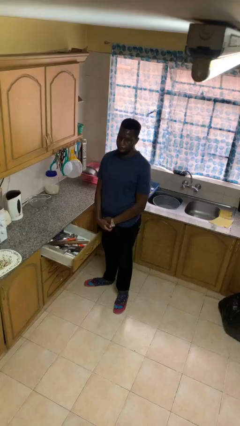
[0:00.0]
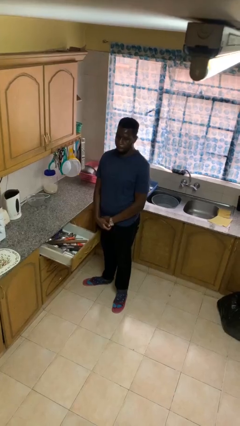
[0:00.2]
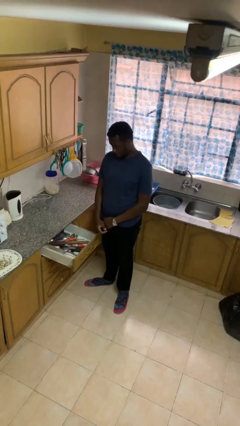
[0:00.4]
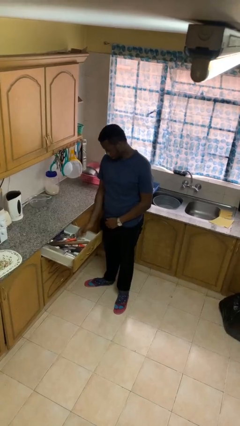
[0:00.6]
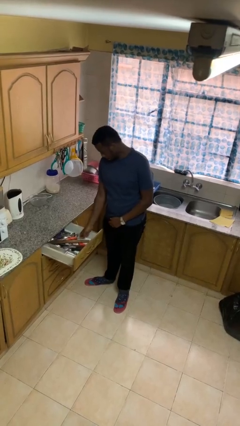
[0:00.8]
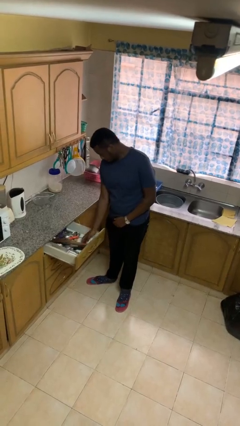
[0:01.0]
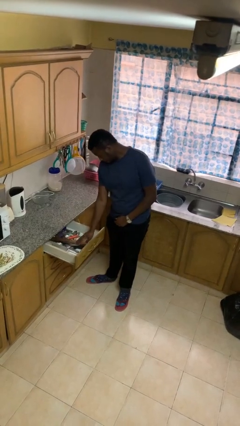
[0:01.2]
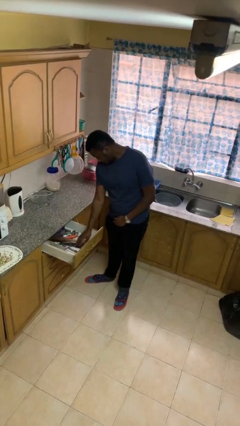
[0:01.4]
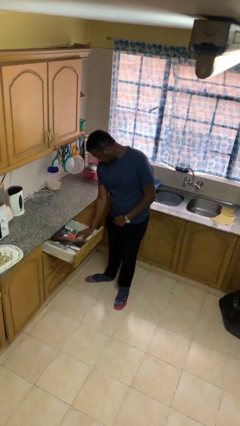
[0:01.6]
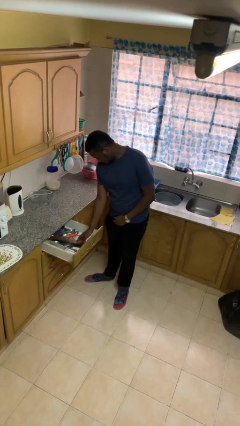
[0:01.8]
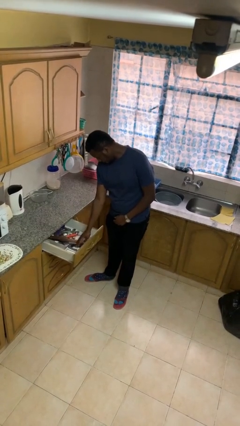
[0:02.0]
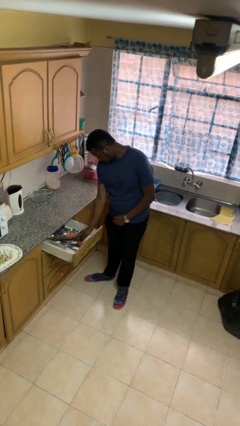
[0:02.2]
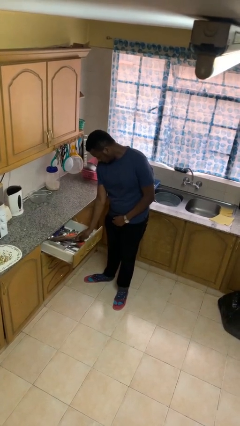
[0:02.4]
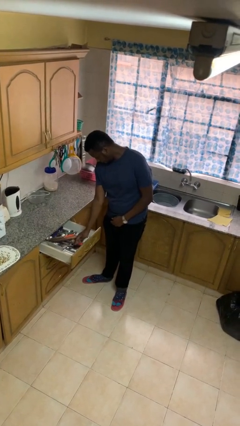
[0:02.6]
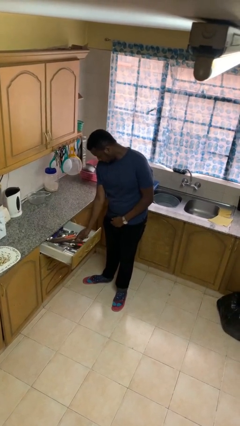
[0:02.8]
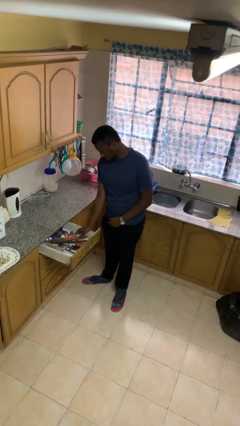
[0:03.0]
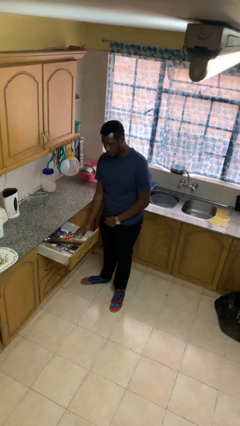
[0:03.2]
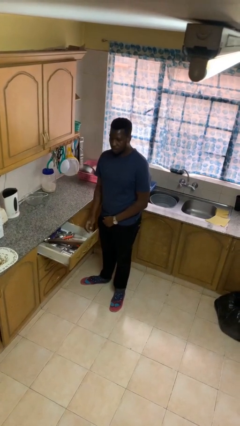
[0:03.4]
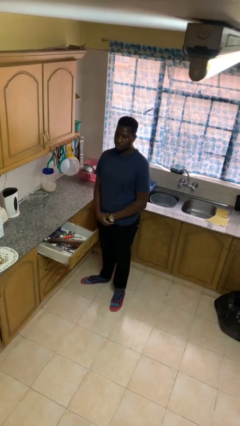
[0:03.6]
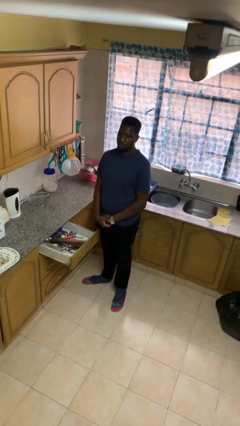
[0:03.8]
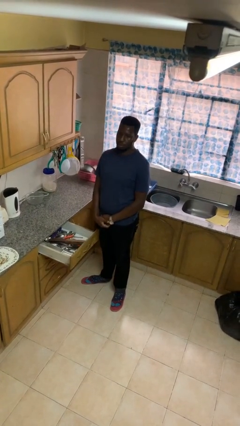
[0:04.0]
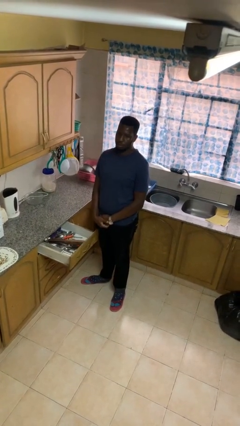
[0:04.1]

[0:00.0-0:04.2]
person searches in kitchen drawer

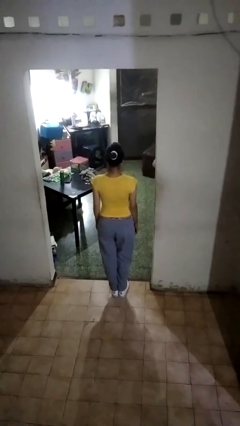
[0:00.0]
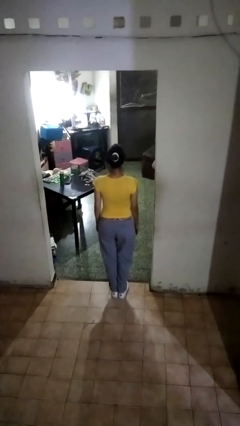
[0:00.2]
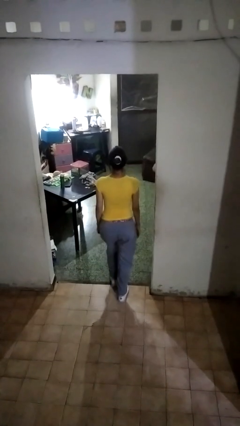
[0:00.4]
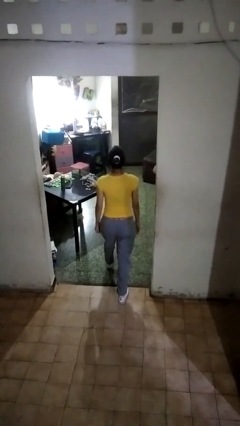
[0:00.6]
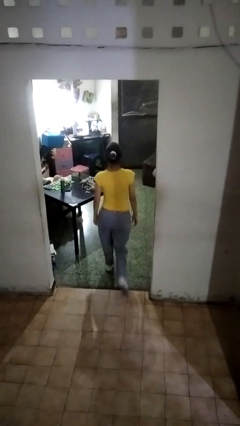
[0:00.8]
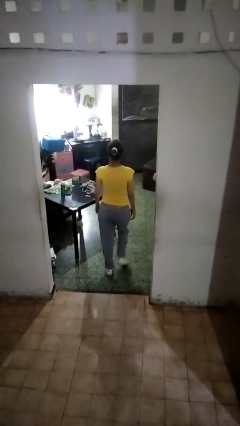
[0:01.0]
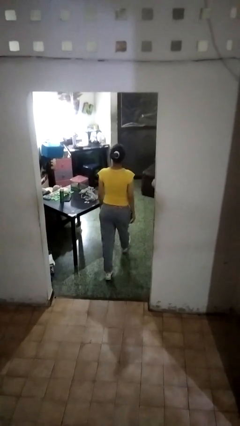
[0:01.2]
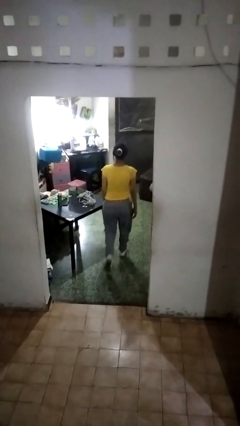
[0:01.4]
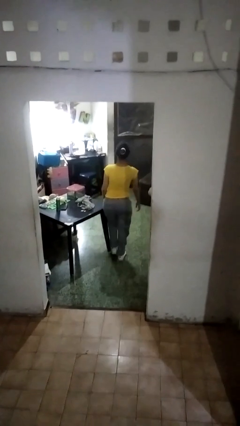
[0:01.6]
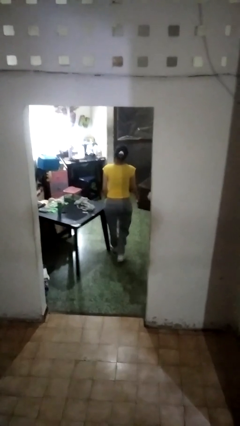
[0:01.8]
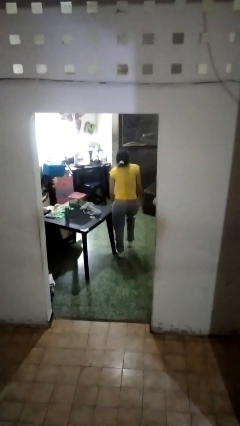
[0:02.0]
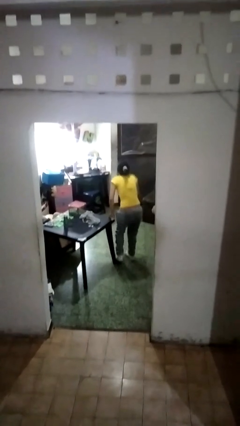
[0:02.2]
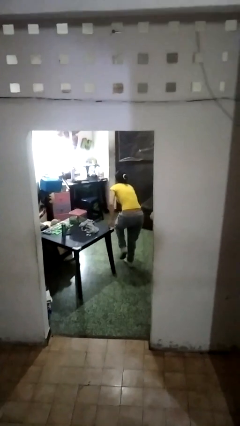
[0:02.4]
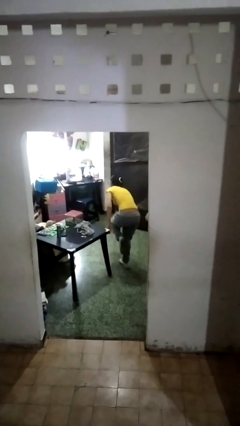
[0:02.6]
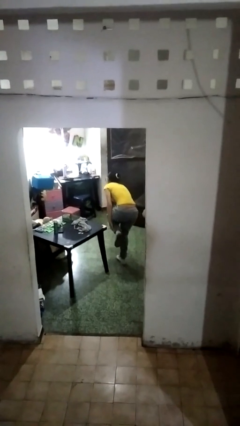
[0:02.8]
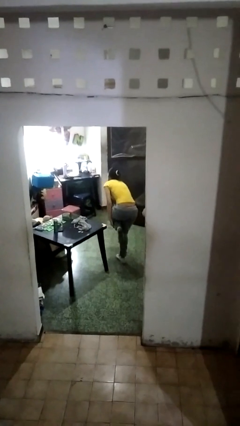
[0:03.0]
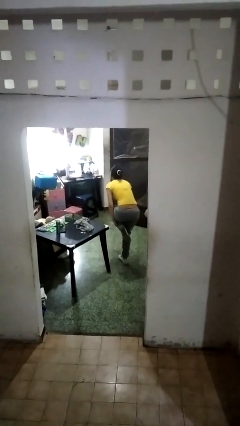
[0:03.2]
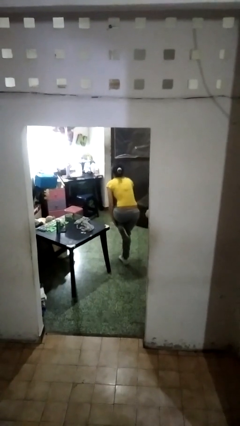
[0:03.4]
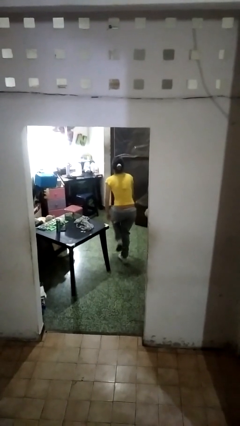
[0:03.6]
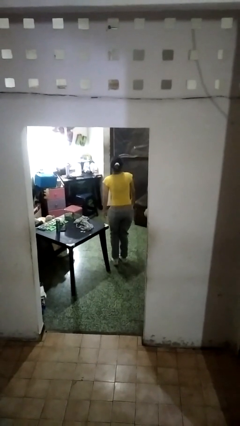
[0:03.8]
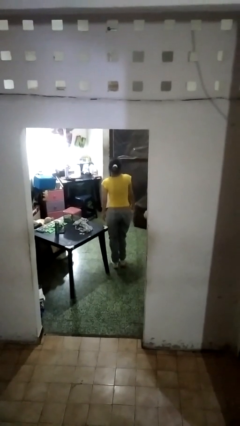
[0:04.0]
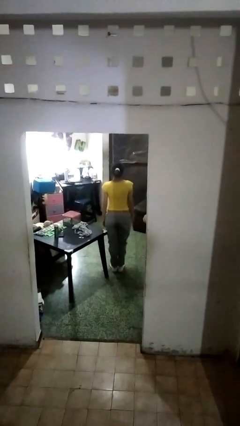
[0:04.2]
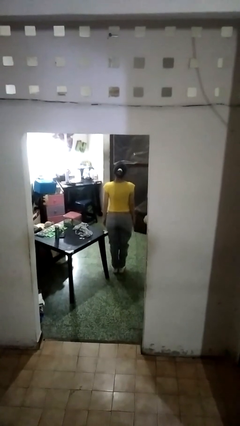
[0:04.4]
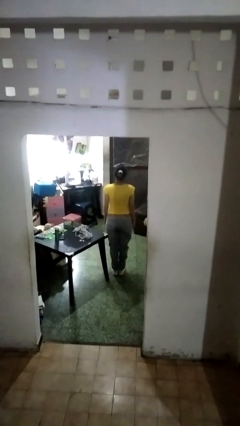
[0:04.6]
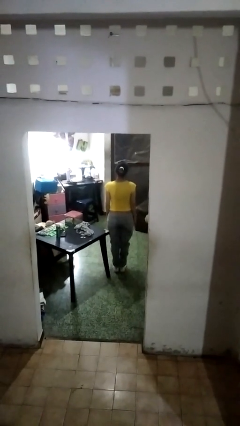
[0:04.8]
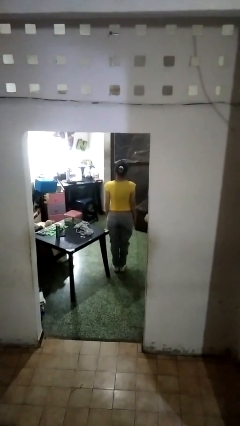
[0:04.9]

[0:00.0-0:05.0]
person bumps into table

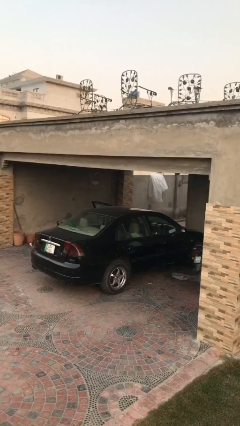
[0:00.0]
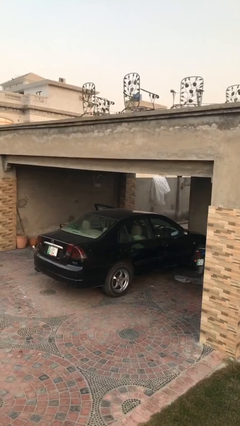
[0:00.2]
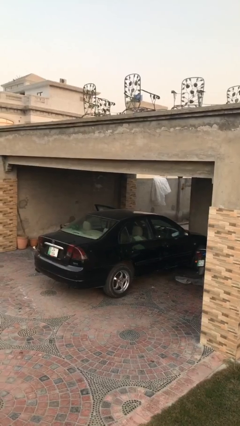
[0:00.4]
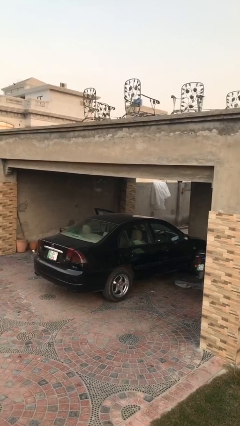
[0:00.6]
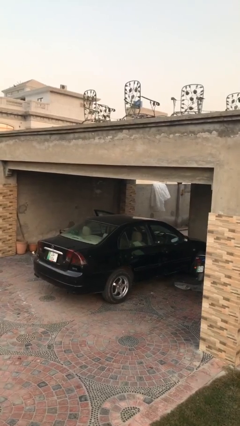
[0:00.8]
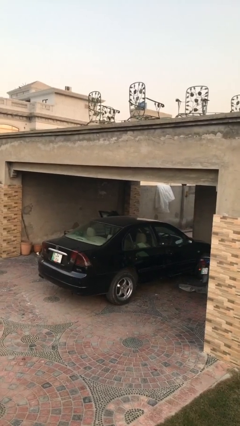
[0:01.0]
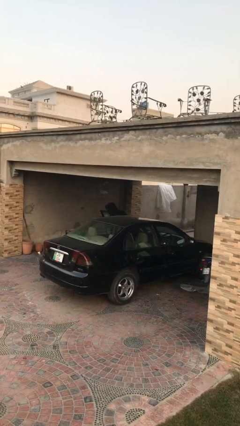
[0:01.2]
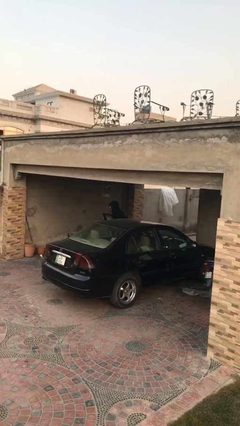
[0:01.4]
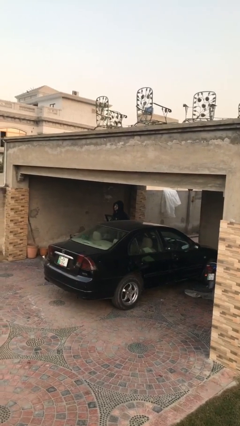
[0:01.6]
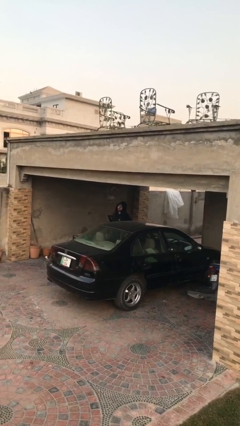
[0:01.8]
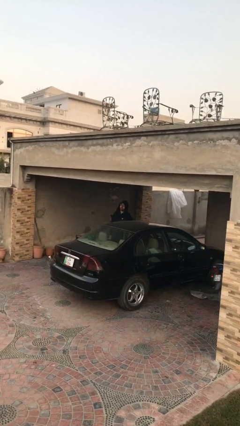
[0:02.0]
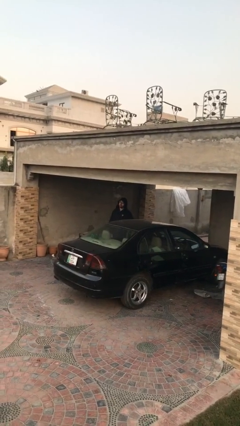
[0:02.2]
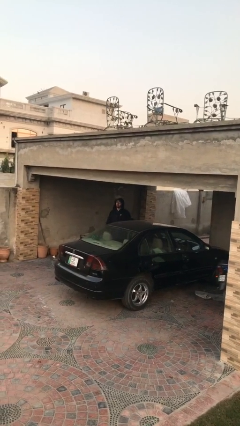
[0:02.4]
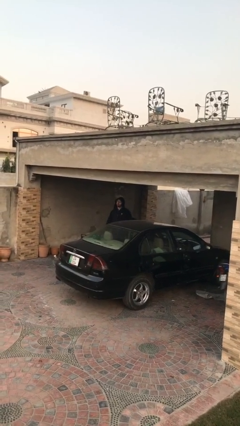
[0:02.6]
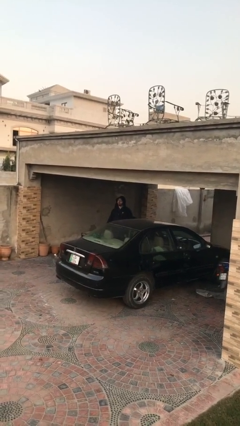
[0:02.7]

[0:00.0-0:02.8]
person exits car

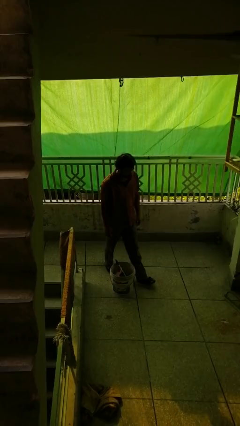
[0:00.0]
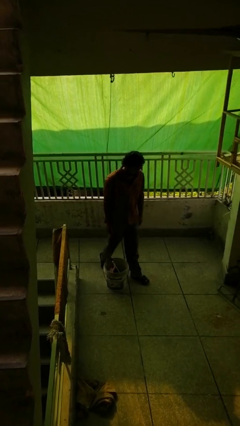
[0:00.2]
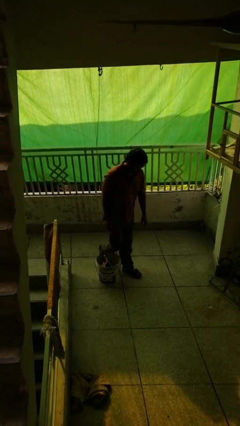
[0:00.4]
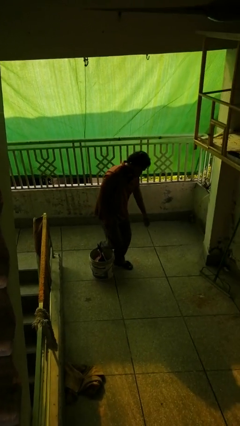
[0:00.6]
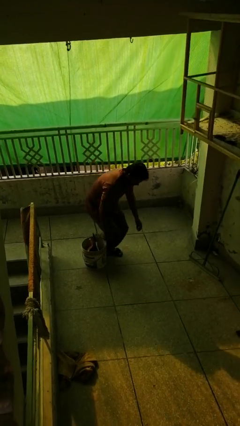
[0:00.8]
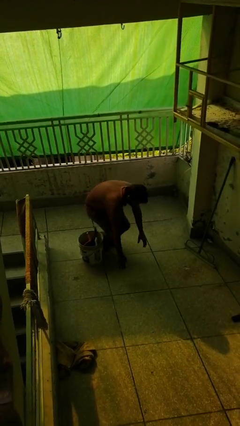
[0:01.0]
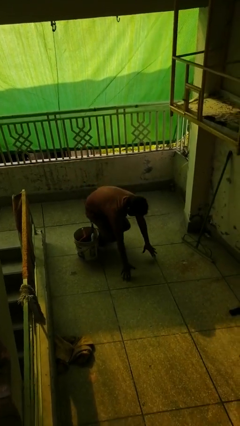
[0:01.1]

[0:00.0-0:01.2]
person trips on object on floor

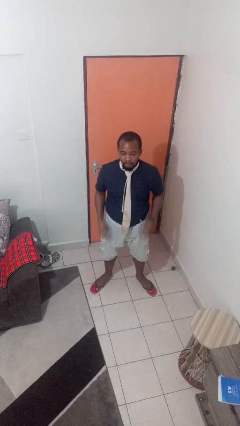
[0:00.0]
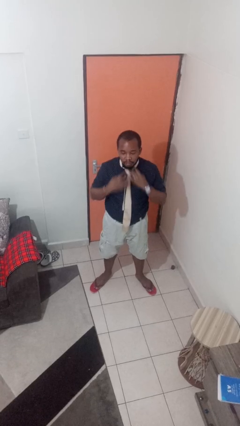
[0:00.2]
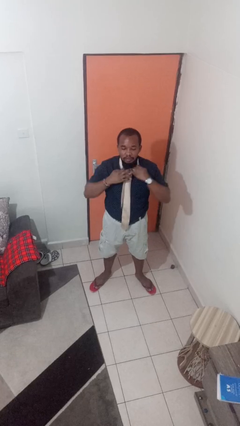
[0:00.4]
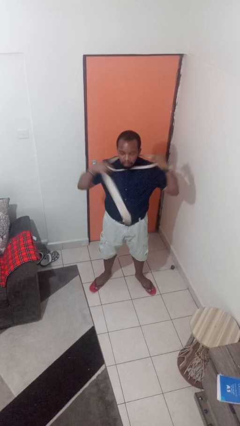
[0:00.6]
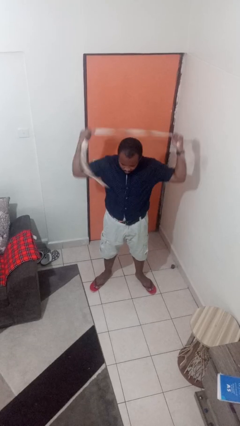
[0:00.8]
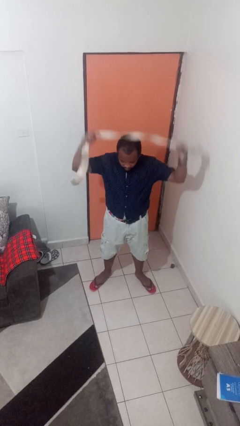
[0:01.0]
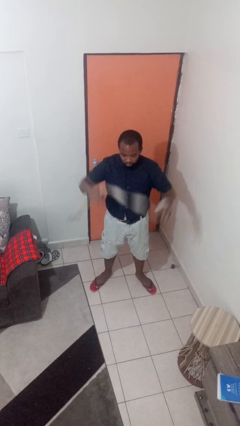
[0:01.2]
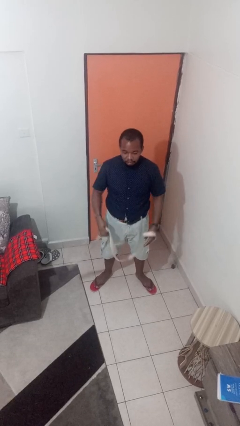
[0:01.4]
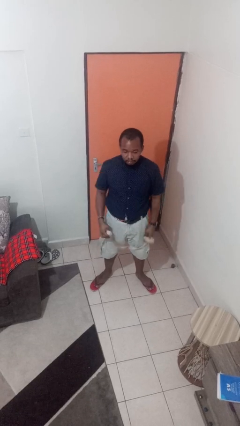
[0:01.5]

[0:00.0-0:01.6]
person takes off necktie

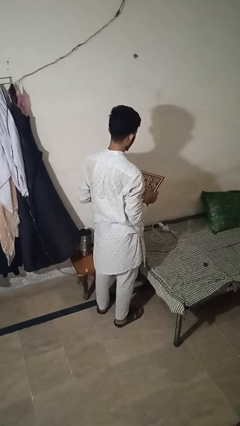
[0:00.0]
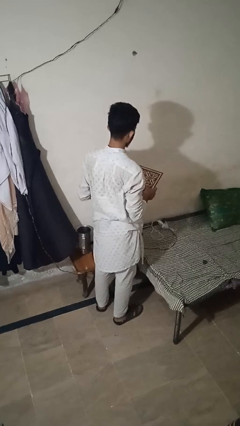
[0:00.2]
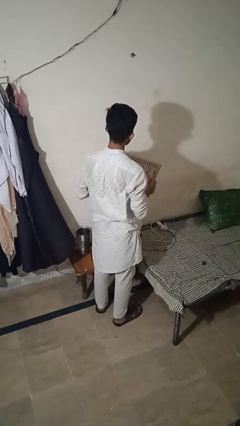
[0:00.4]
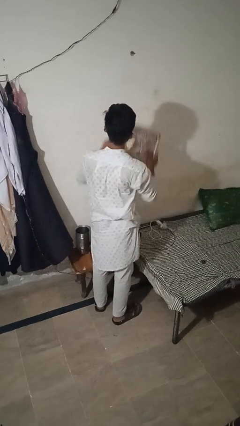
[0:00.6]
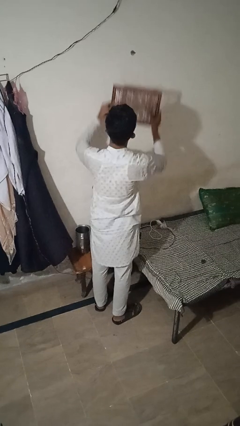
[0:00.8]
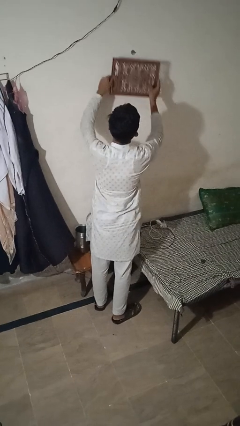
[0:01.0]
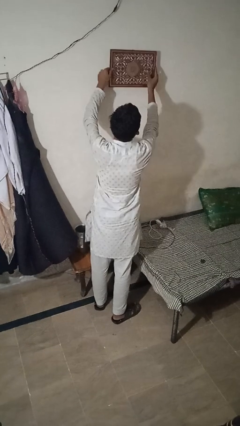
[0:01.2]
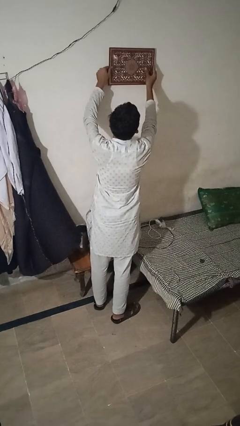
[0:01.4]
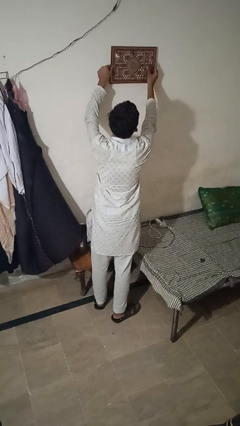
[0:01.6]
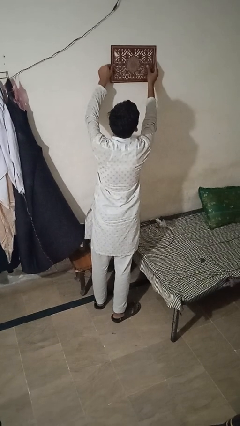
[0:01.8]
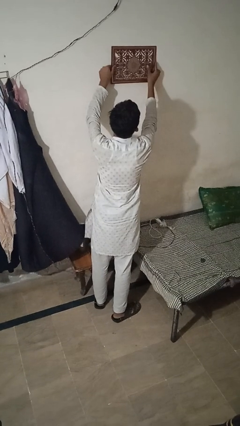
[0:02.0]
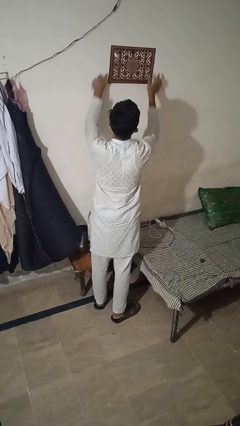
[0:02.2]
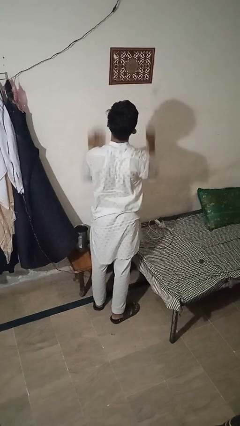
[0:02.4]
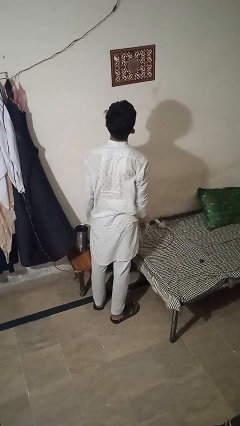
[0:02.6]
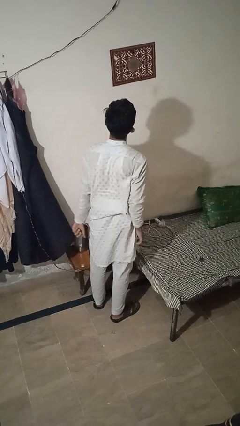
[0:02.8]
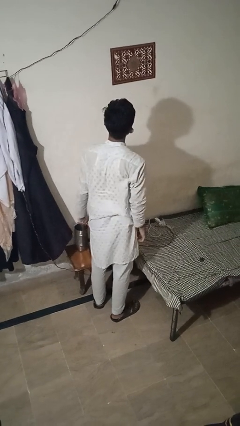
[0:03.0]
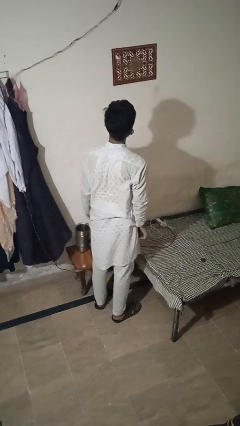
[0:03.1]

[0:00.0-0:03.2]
person puts up picture frame
